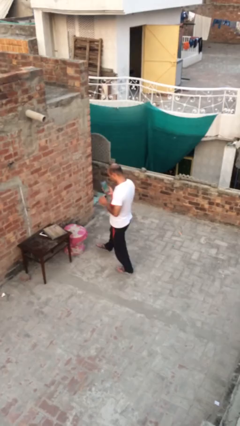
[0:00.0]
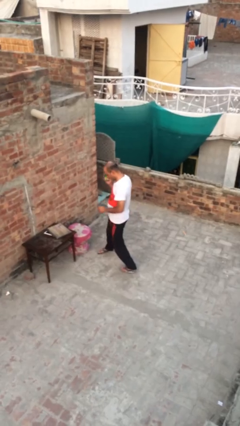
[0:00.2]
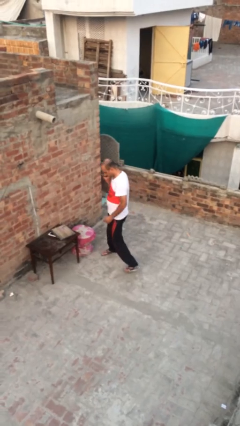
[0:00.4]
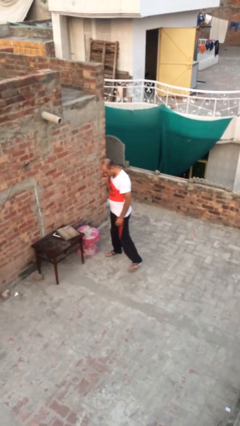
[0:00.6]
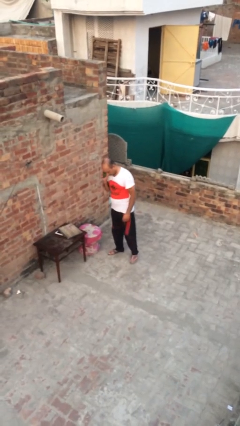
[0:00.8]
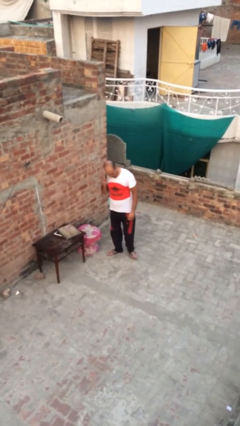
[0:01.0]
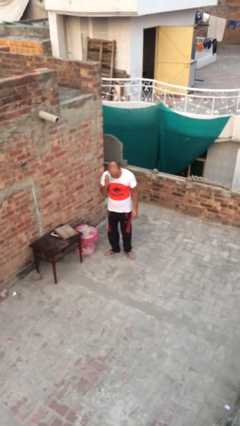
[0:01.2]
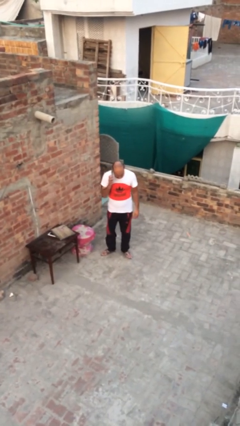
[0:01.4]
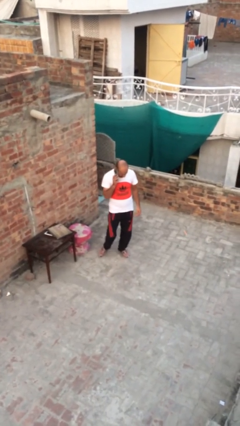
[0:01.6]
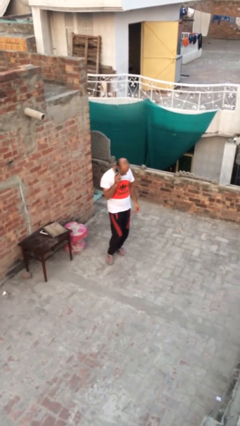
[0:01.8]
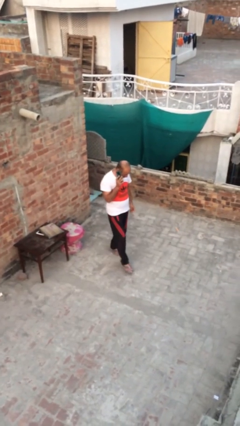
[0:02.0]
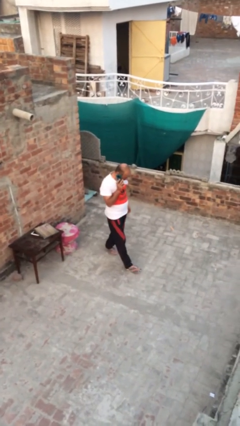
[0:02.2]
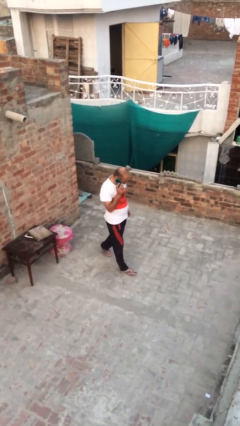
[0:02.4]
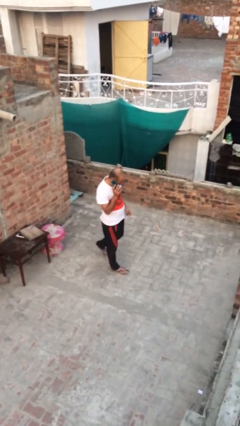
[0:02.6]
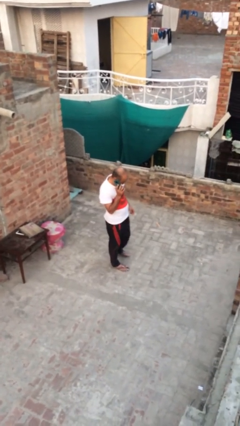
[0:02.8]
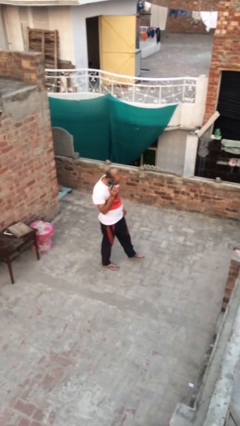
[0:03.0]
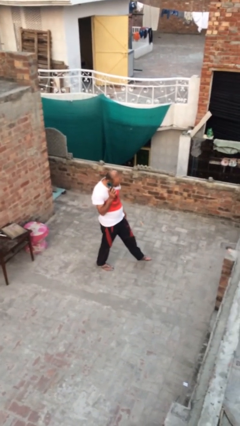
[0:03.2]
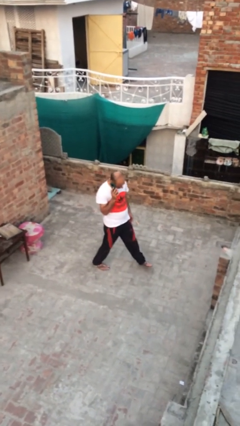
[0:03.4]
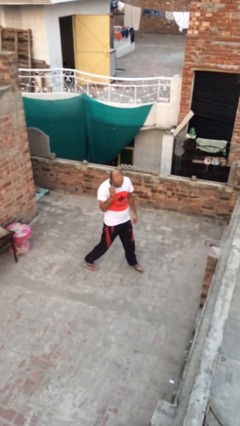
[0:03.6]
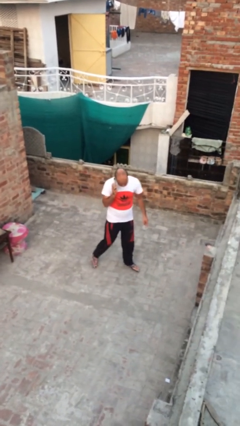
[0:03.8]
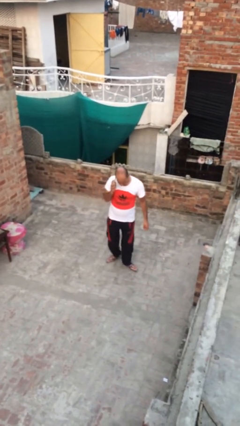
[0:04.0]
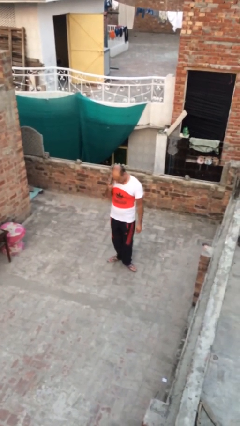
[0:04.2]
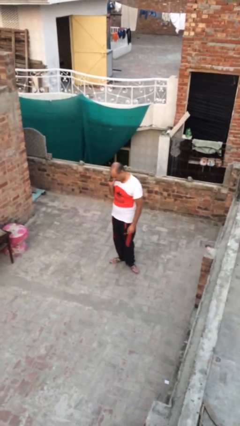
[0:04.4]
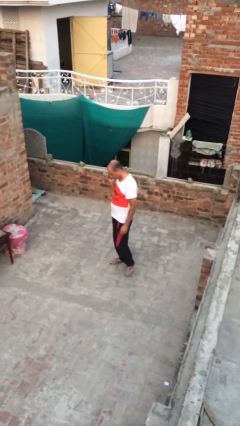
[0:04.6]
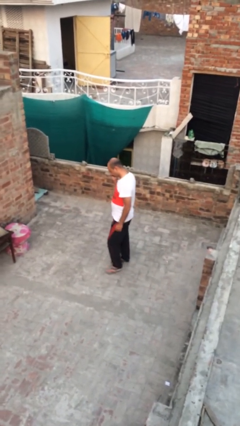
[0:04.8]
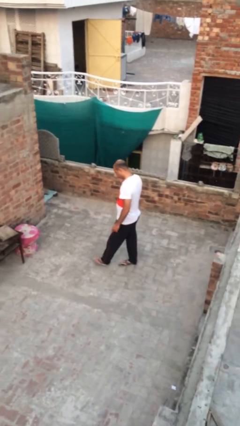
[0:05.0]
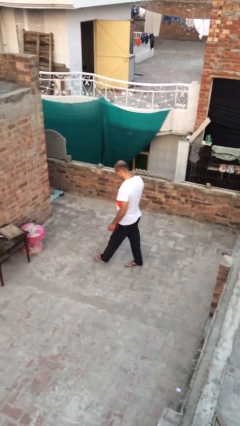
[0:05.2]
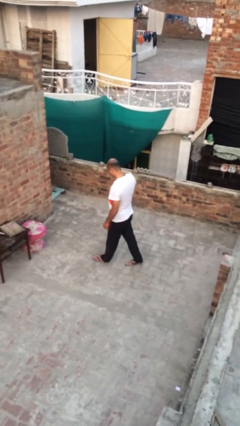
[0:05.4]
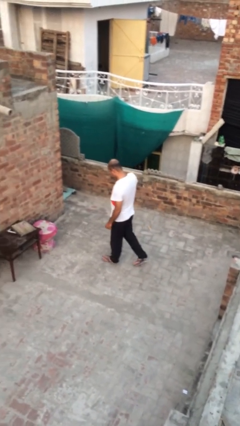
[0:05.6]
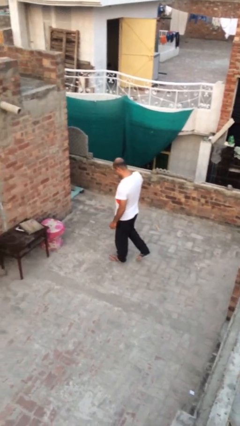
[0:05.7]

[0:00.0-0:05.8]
person talks on phone

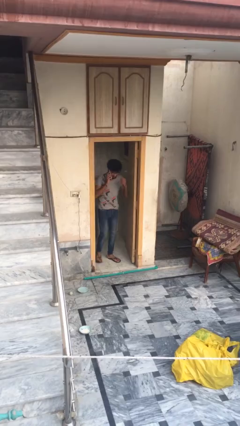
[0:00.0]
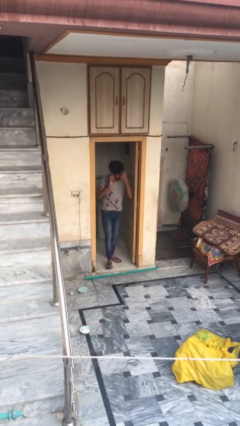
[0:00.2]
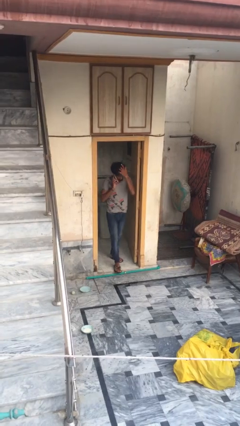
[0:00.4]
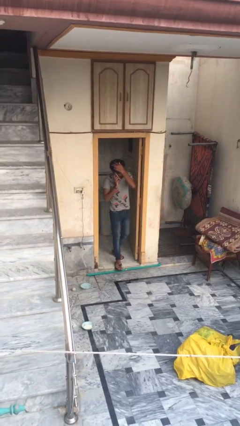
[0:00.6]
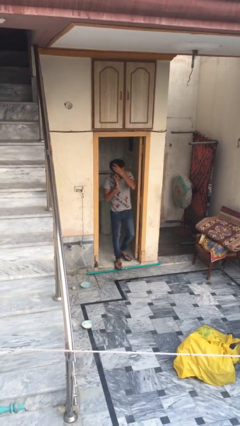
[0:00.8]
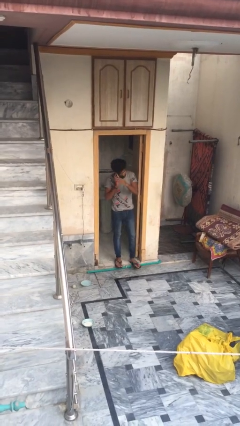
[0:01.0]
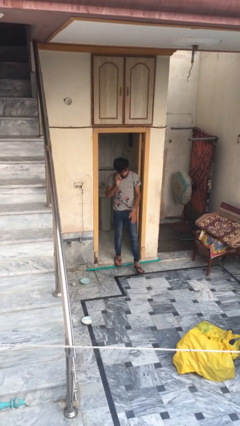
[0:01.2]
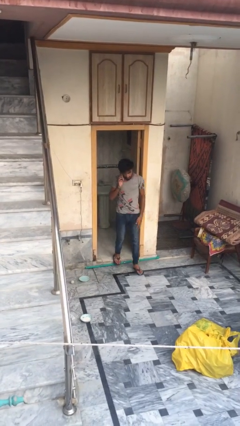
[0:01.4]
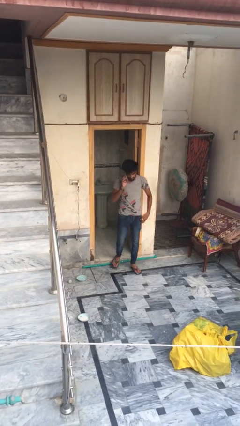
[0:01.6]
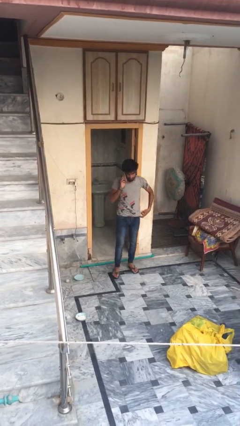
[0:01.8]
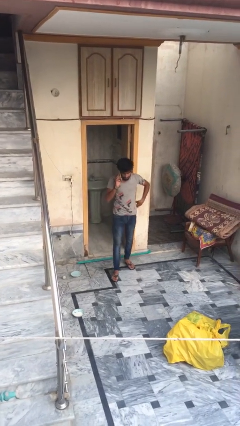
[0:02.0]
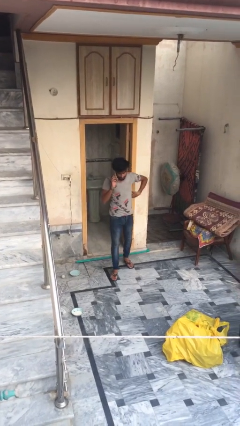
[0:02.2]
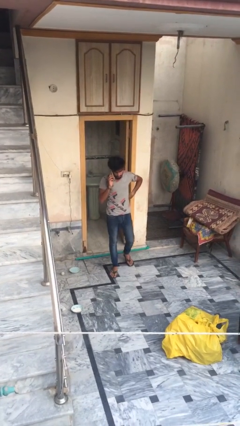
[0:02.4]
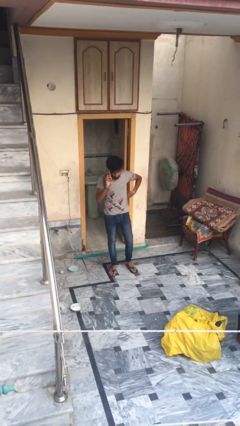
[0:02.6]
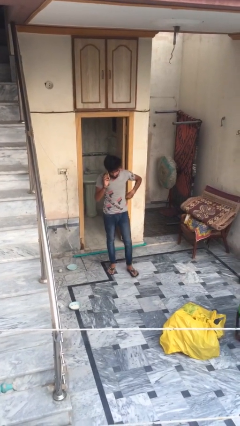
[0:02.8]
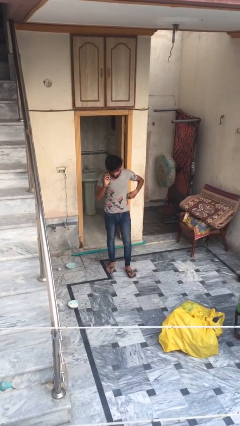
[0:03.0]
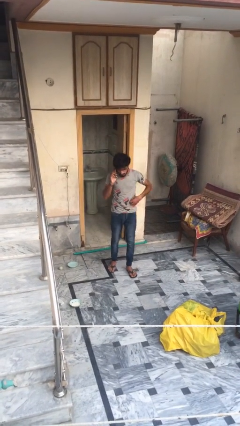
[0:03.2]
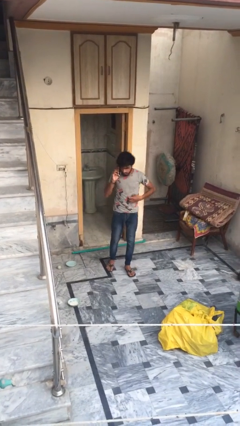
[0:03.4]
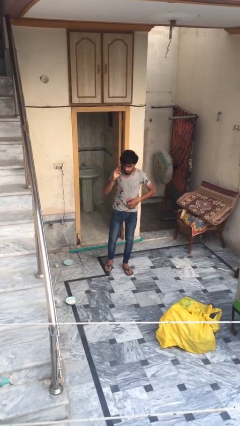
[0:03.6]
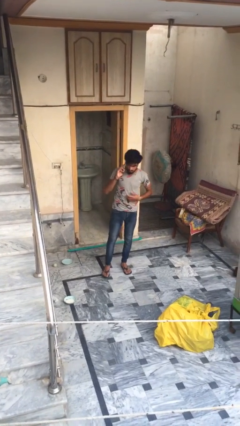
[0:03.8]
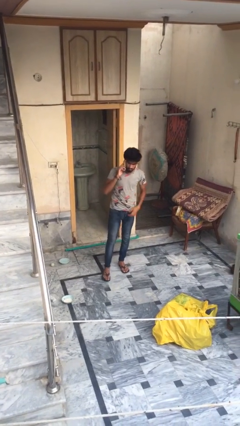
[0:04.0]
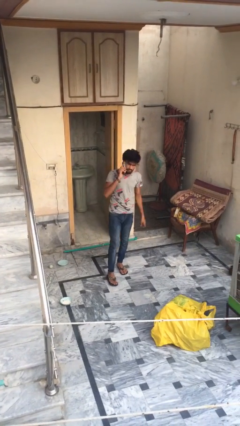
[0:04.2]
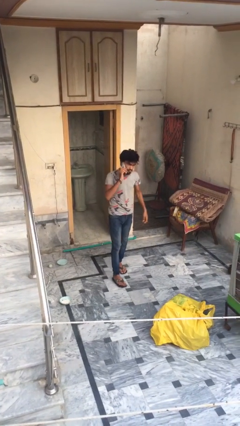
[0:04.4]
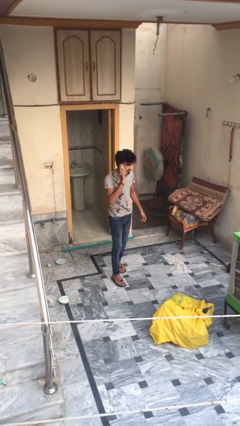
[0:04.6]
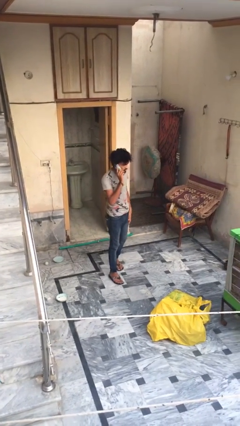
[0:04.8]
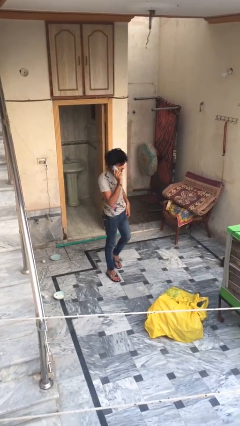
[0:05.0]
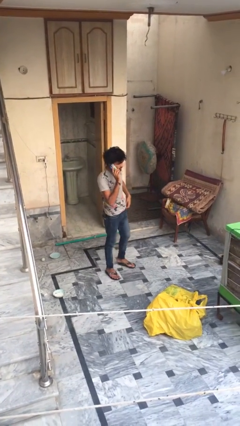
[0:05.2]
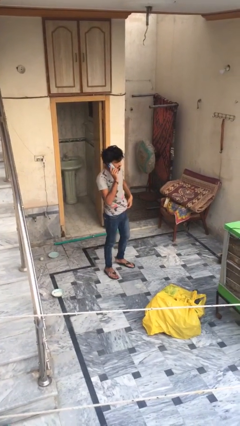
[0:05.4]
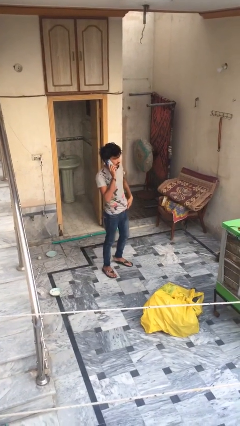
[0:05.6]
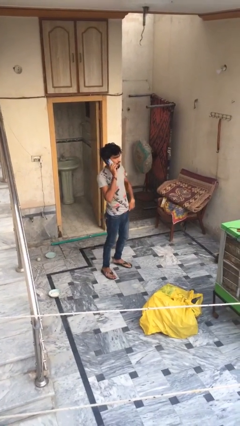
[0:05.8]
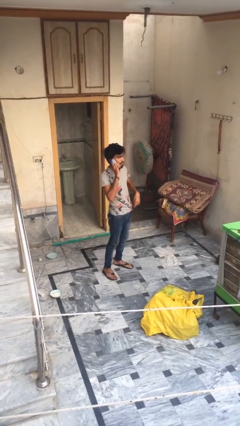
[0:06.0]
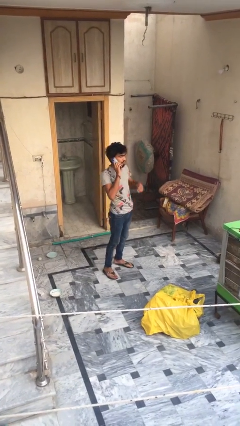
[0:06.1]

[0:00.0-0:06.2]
person enters scene through structure

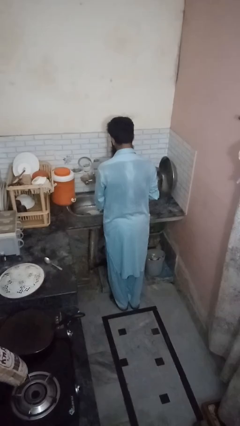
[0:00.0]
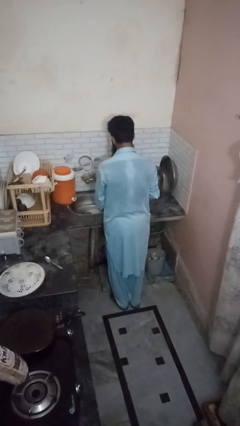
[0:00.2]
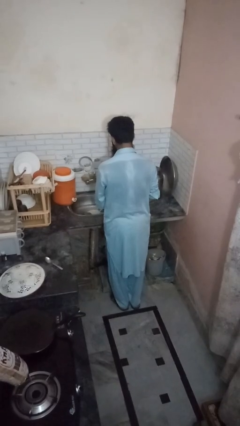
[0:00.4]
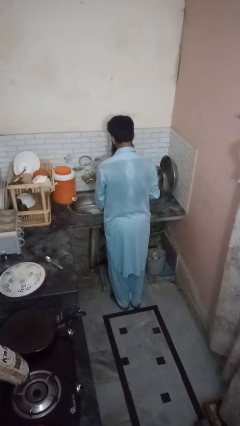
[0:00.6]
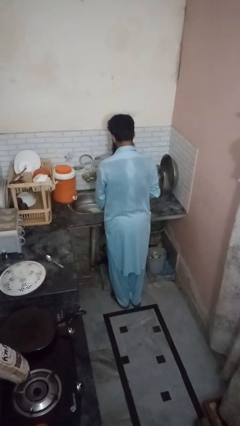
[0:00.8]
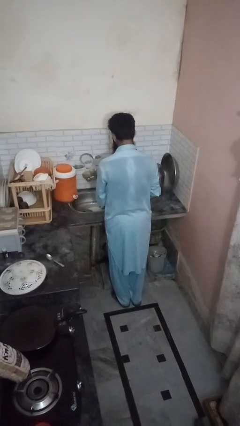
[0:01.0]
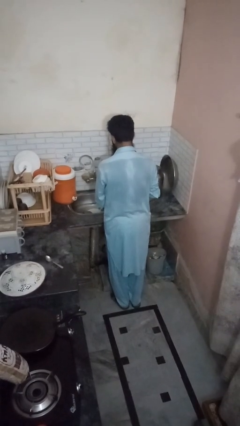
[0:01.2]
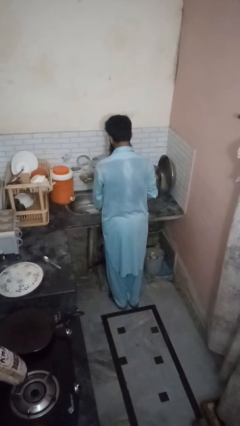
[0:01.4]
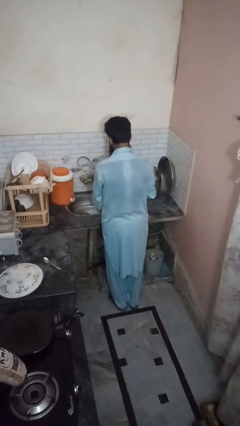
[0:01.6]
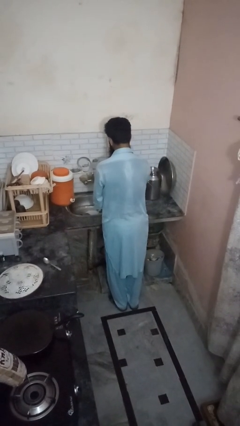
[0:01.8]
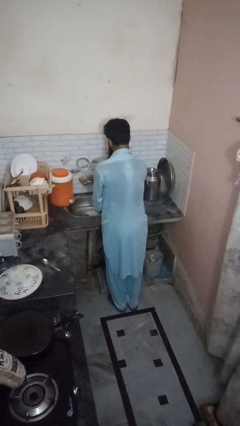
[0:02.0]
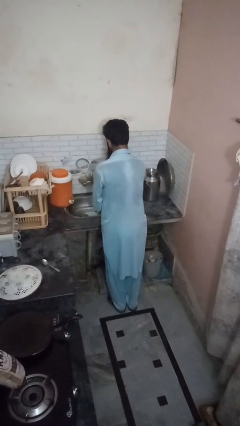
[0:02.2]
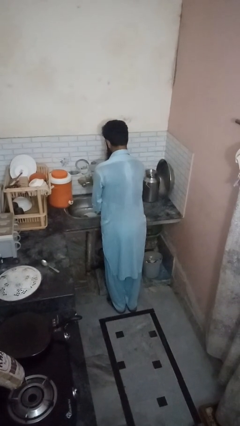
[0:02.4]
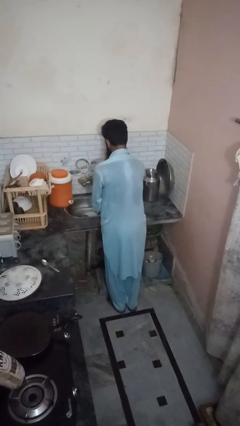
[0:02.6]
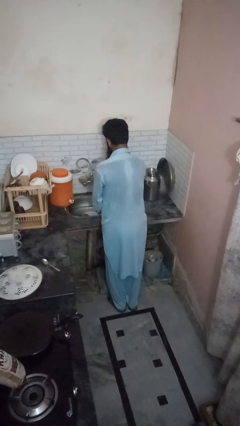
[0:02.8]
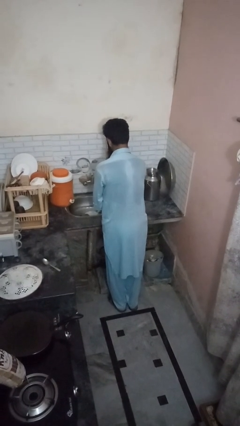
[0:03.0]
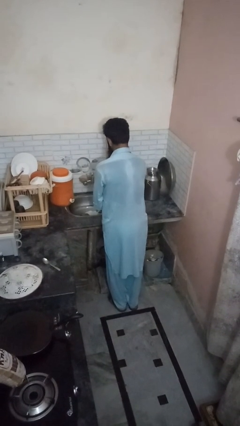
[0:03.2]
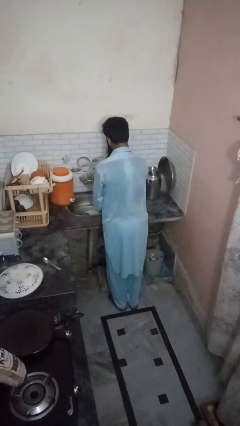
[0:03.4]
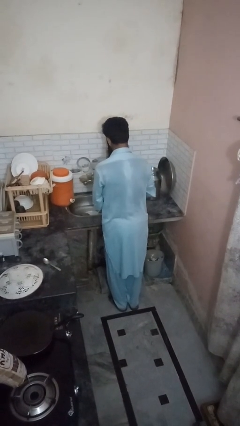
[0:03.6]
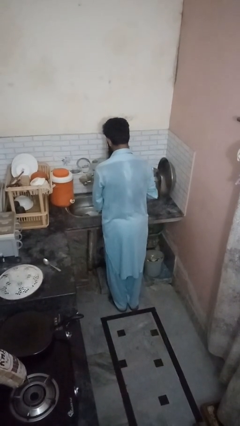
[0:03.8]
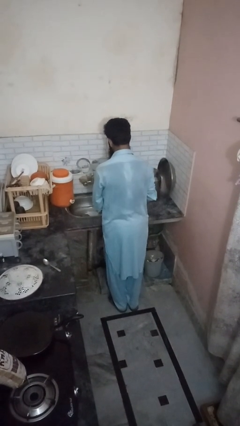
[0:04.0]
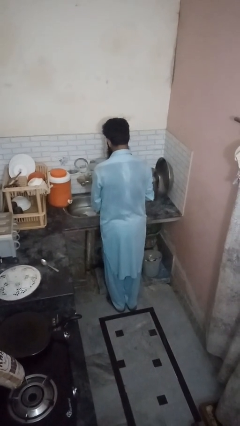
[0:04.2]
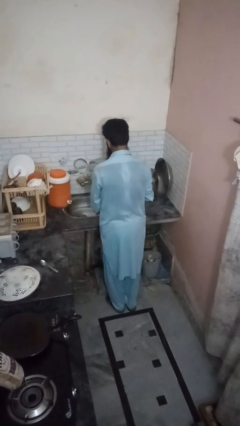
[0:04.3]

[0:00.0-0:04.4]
person opens dishwasher

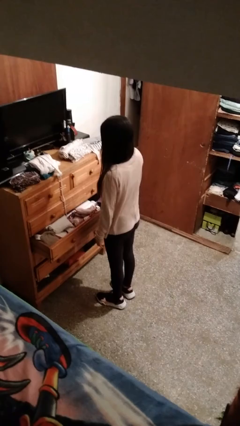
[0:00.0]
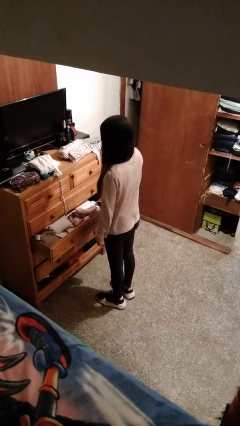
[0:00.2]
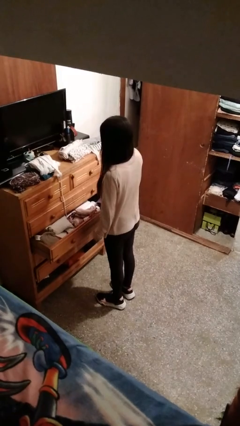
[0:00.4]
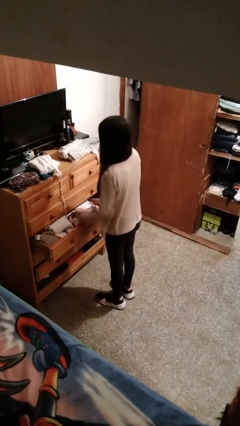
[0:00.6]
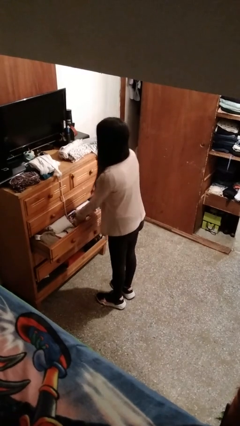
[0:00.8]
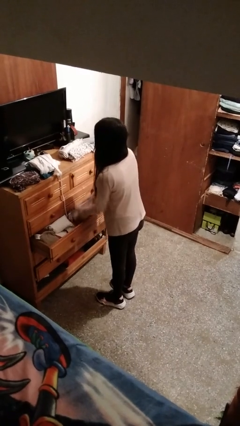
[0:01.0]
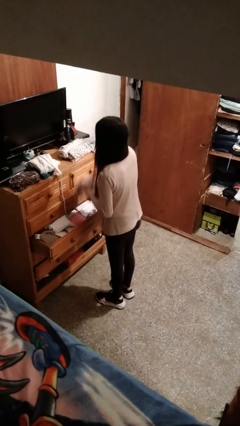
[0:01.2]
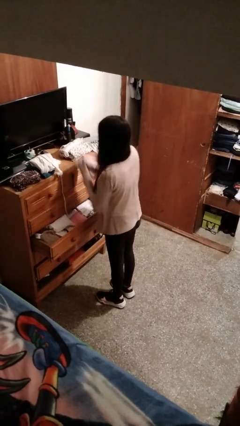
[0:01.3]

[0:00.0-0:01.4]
person takes clothes from dresser
